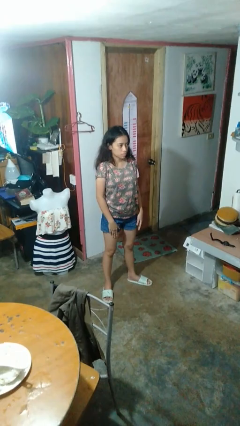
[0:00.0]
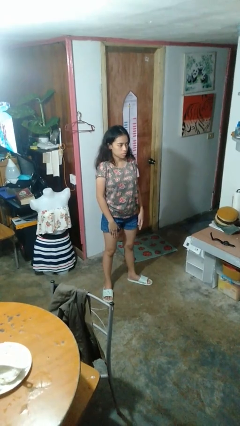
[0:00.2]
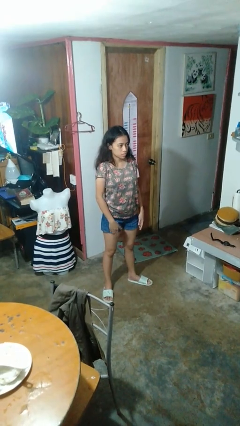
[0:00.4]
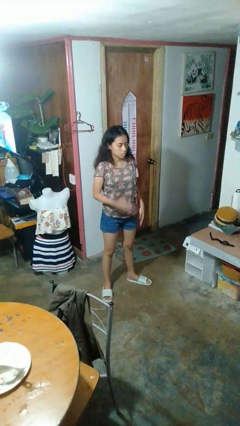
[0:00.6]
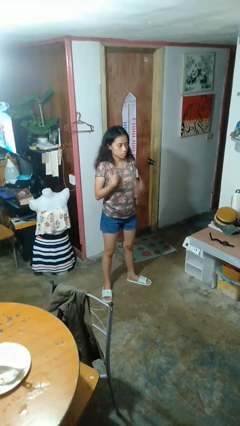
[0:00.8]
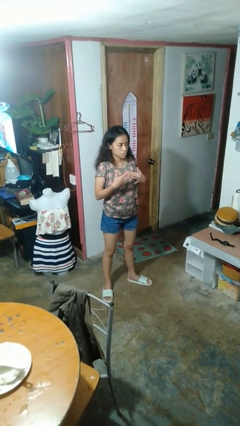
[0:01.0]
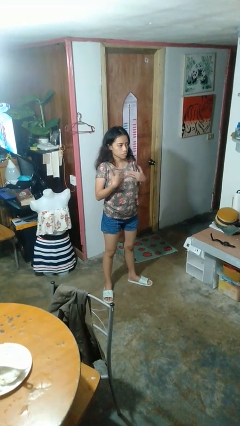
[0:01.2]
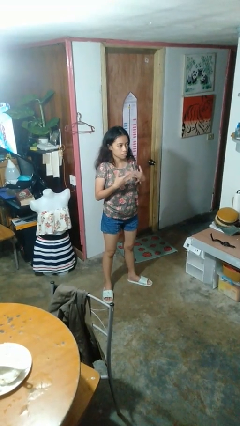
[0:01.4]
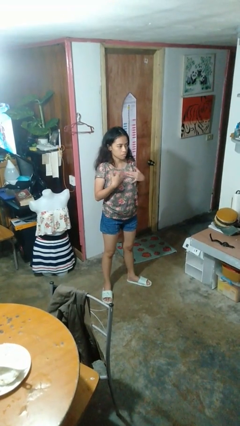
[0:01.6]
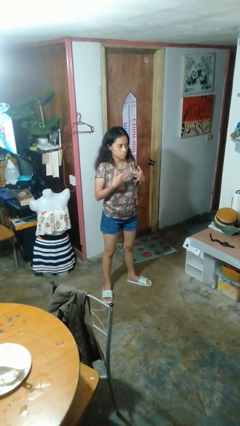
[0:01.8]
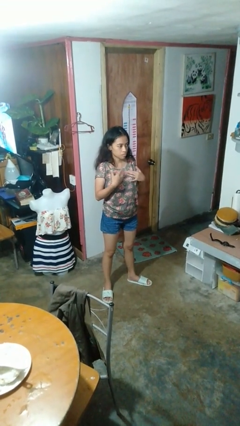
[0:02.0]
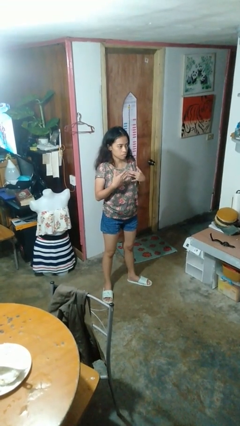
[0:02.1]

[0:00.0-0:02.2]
person drums on chest

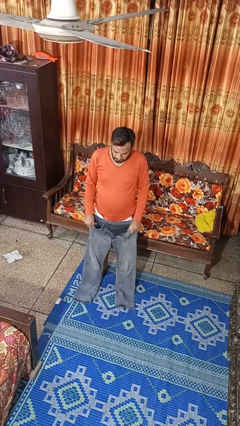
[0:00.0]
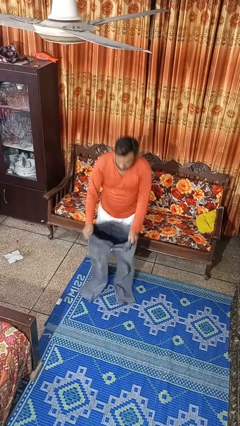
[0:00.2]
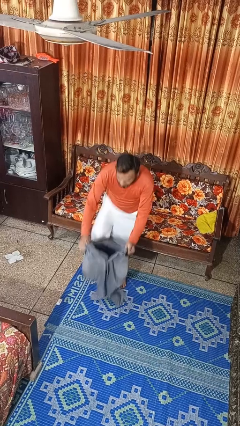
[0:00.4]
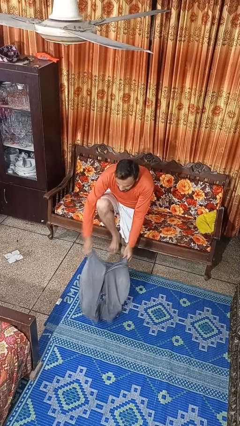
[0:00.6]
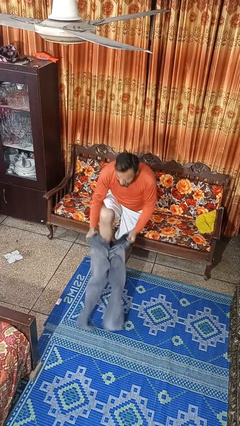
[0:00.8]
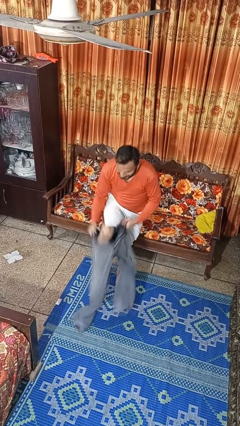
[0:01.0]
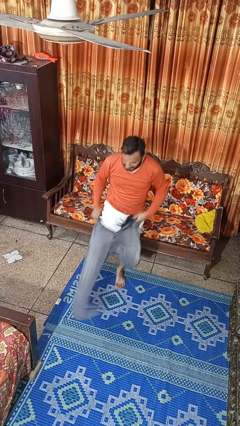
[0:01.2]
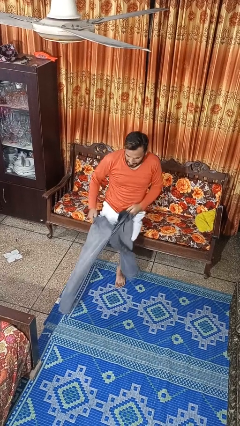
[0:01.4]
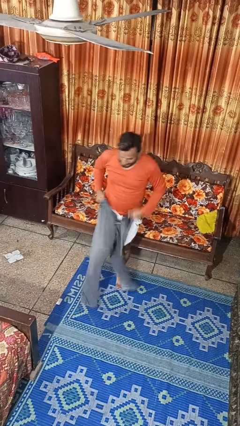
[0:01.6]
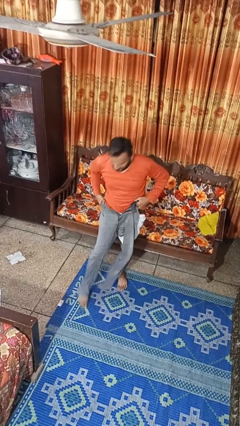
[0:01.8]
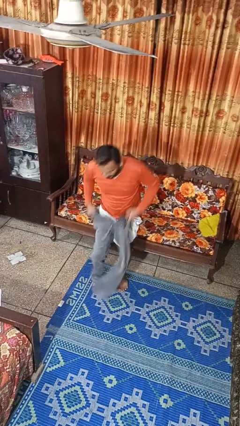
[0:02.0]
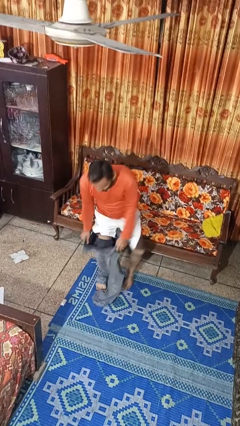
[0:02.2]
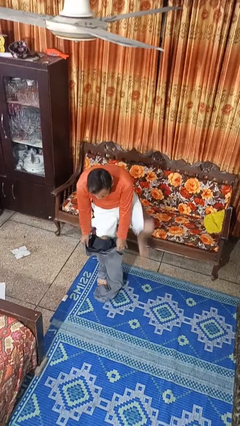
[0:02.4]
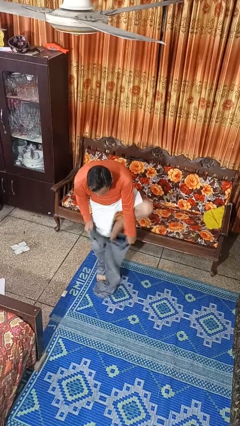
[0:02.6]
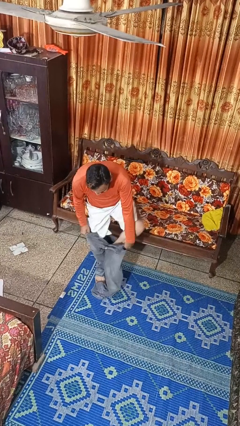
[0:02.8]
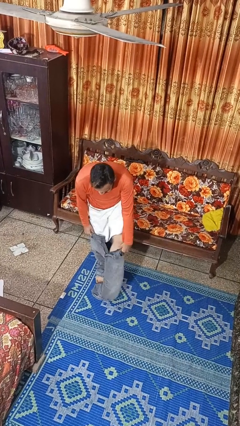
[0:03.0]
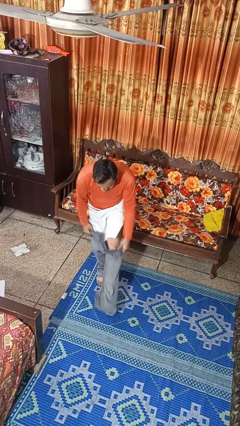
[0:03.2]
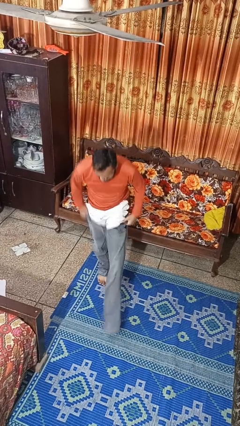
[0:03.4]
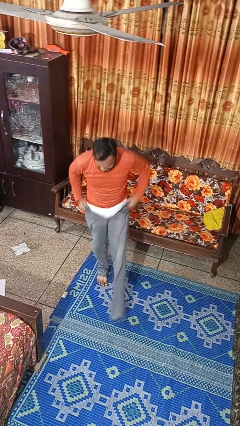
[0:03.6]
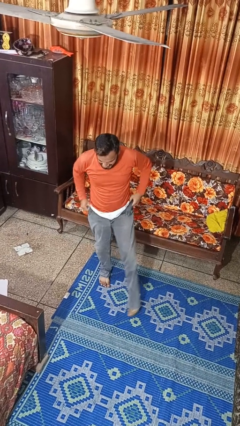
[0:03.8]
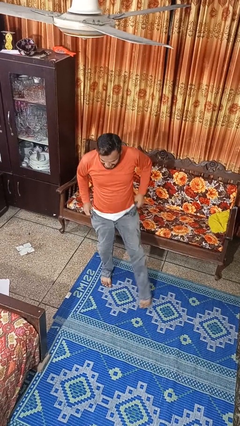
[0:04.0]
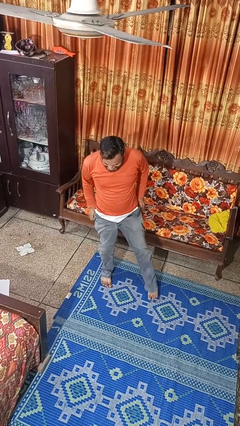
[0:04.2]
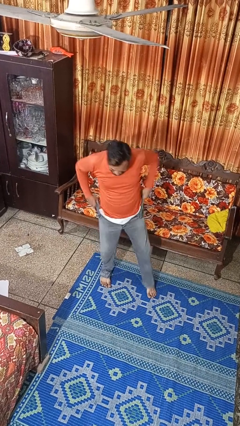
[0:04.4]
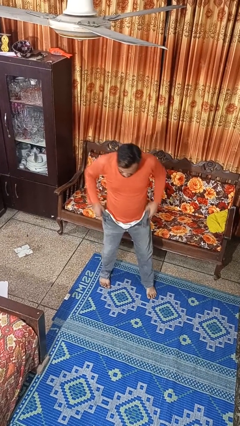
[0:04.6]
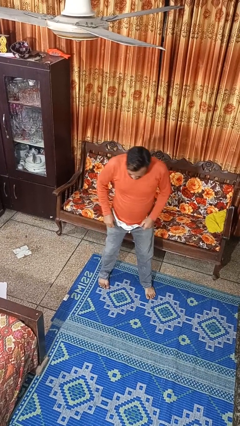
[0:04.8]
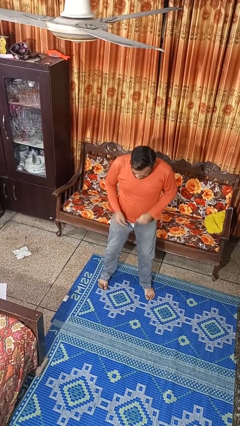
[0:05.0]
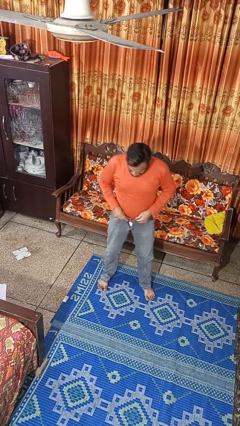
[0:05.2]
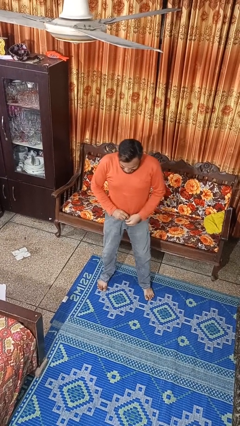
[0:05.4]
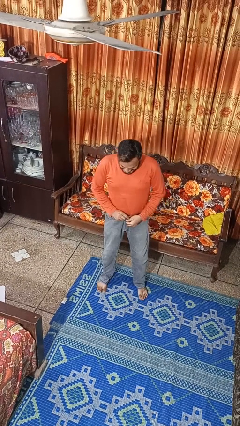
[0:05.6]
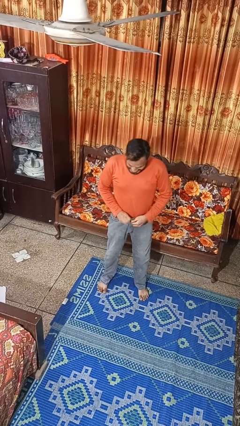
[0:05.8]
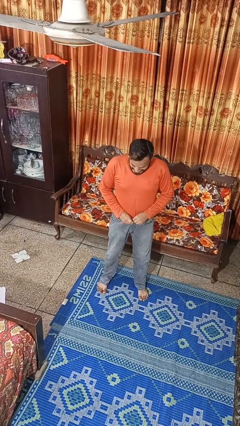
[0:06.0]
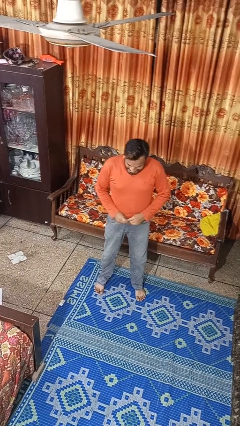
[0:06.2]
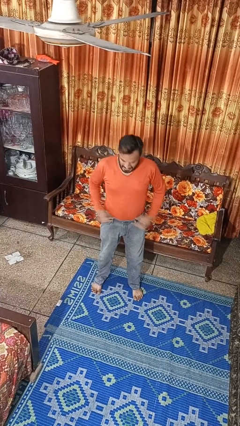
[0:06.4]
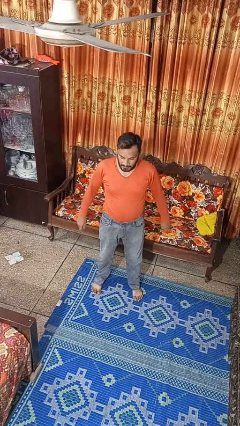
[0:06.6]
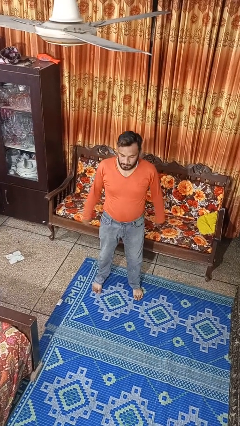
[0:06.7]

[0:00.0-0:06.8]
person puts on pants

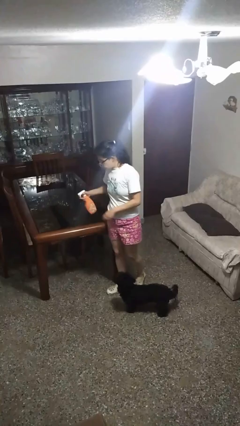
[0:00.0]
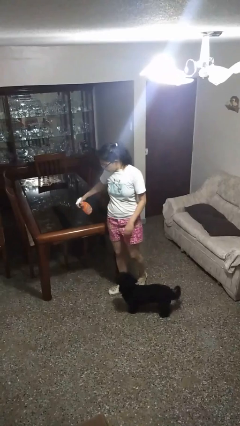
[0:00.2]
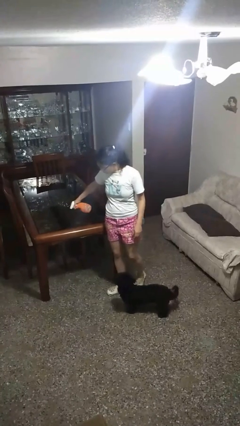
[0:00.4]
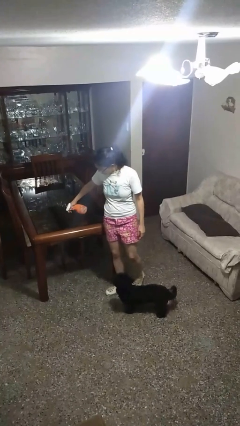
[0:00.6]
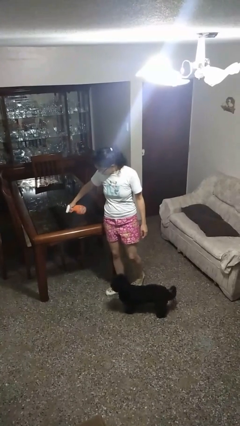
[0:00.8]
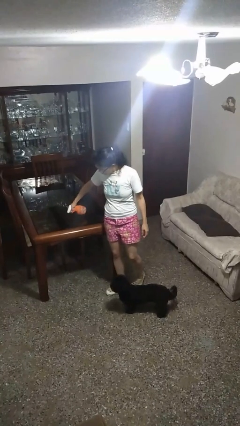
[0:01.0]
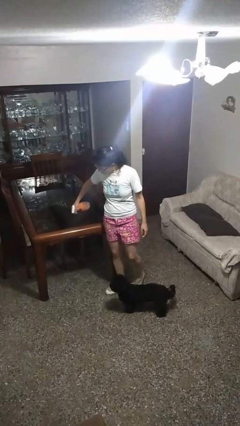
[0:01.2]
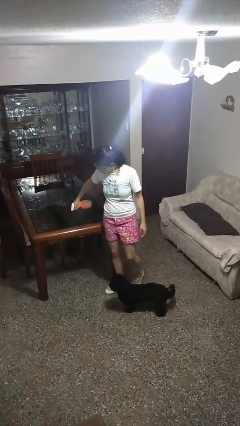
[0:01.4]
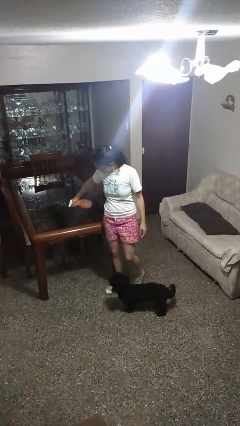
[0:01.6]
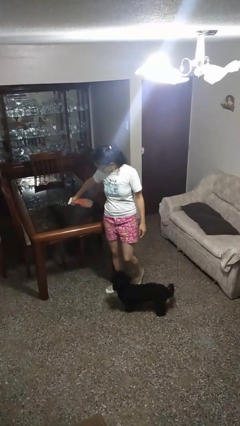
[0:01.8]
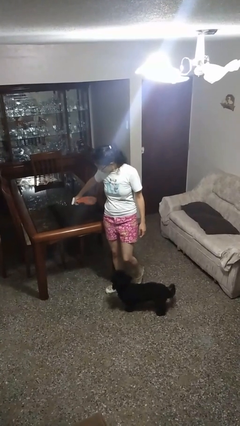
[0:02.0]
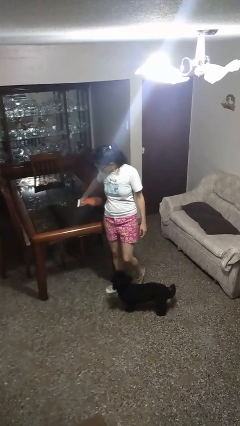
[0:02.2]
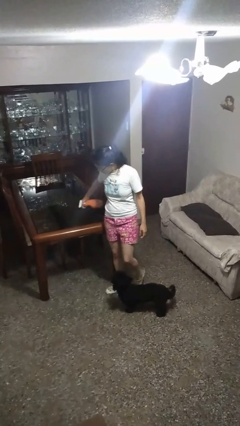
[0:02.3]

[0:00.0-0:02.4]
person sprays from bottle

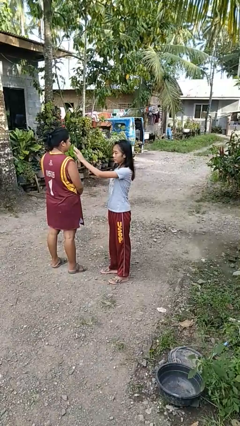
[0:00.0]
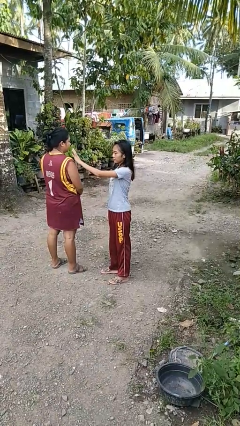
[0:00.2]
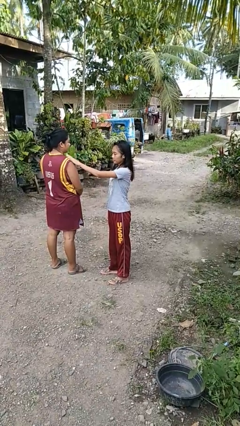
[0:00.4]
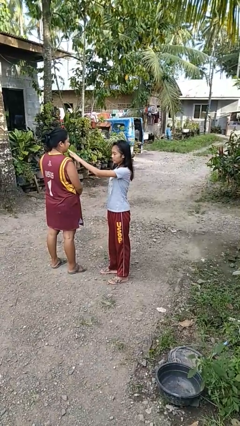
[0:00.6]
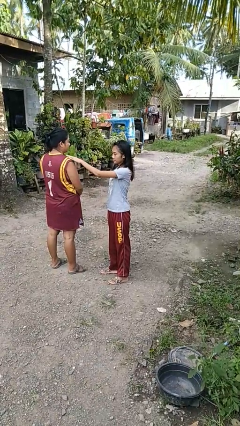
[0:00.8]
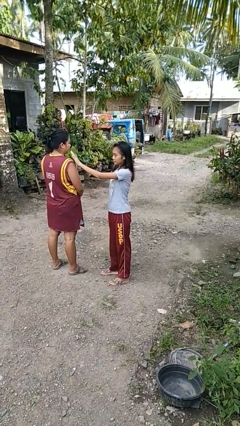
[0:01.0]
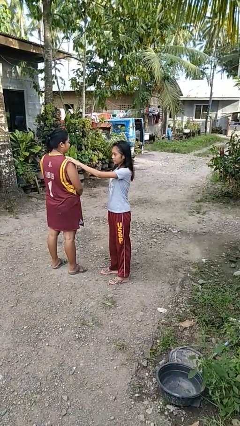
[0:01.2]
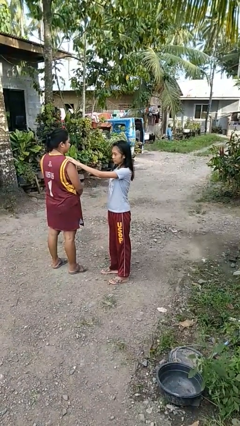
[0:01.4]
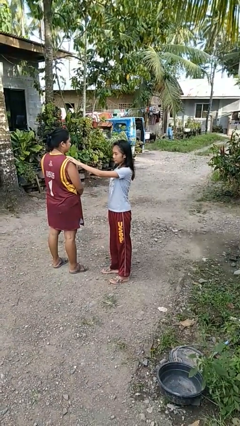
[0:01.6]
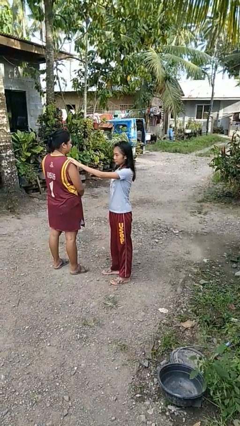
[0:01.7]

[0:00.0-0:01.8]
person pounds shoulders of person

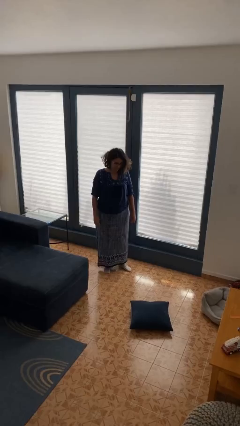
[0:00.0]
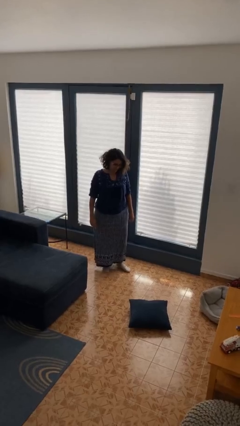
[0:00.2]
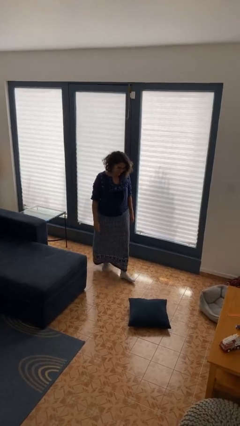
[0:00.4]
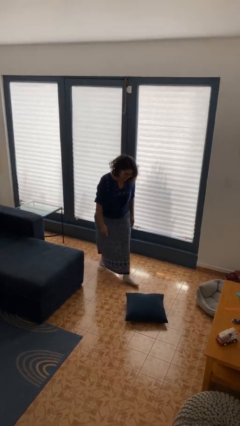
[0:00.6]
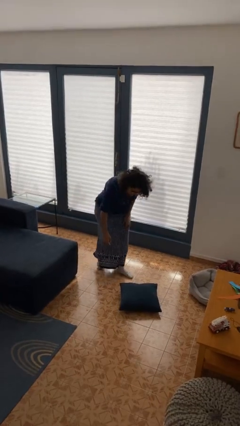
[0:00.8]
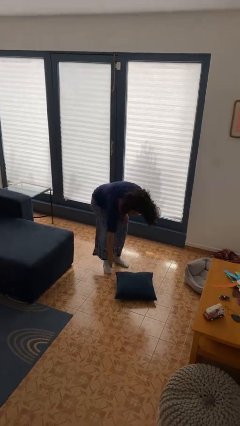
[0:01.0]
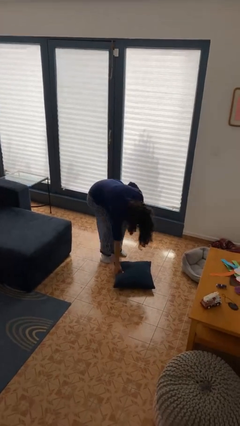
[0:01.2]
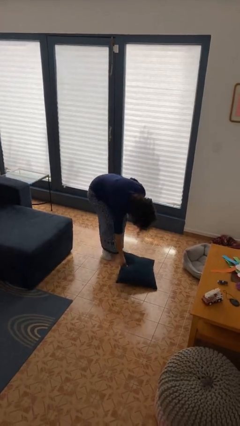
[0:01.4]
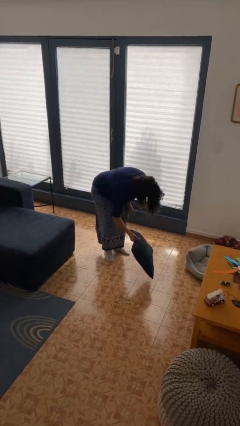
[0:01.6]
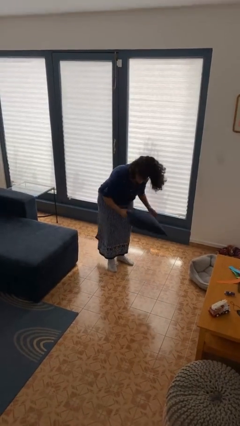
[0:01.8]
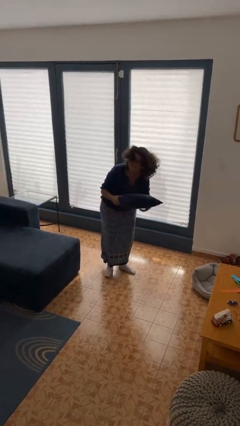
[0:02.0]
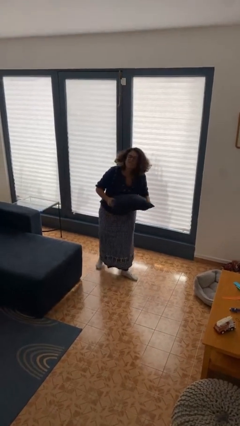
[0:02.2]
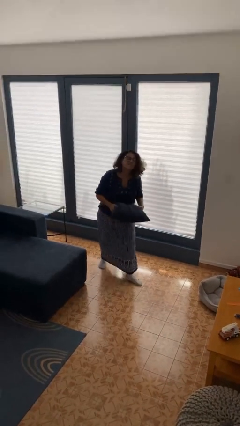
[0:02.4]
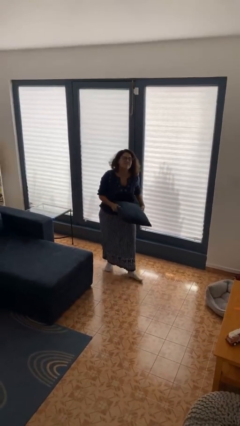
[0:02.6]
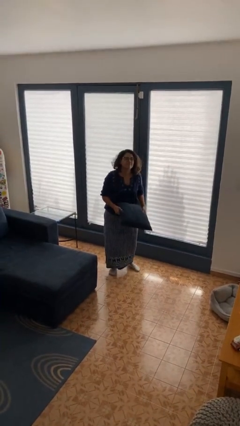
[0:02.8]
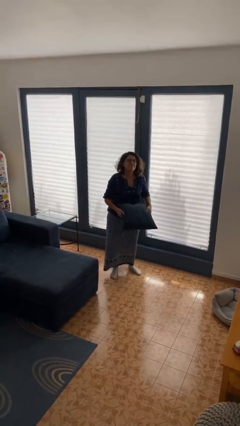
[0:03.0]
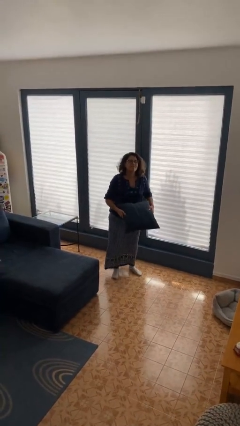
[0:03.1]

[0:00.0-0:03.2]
person picks up object from floor

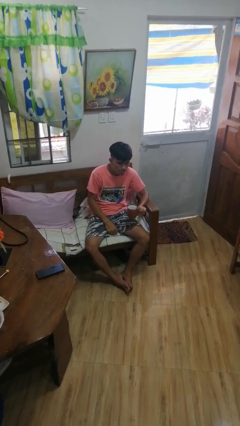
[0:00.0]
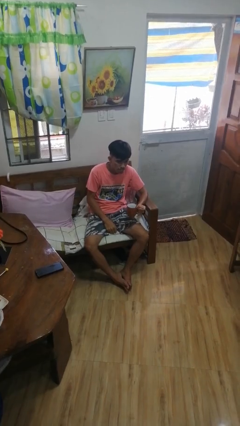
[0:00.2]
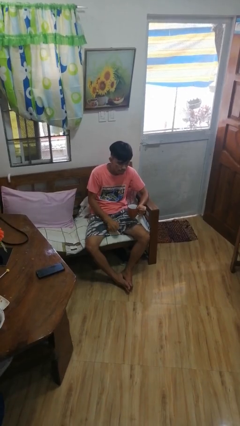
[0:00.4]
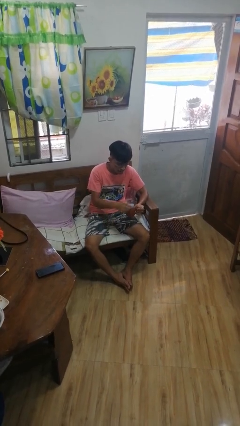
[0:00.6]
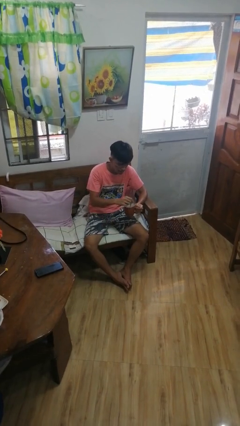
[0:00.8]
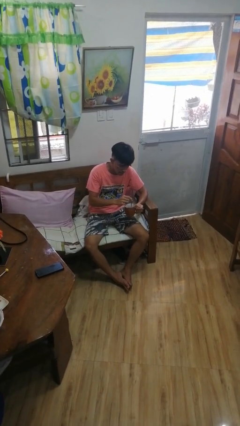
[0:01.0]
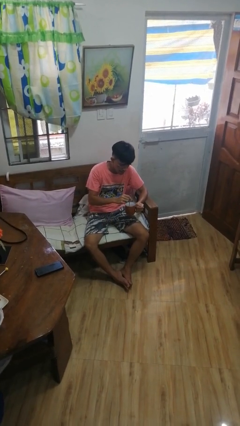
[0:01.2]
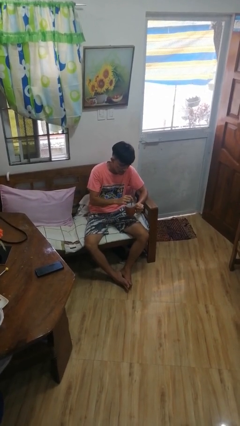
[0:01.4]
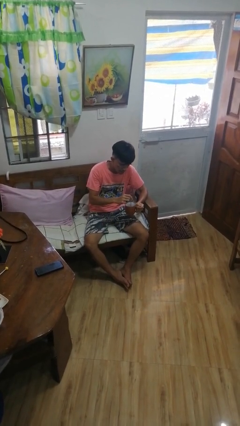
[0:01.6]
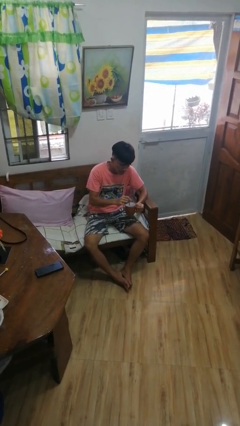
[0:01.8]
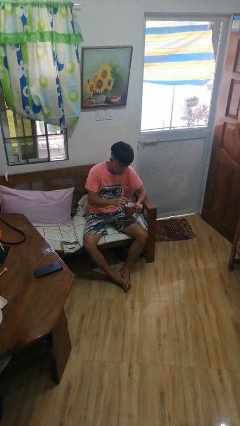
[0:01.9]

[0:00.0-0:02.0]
person stirs mug
